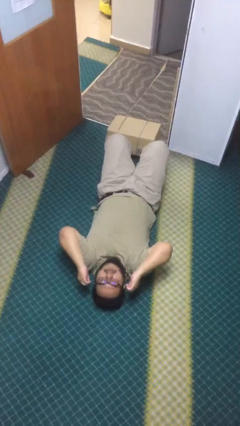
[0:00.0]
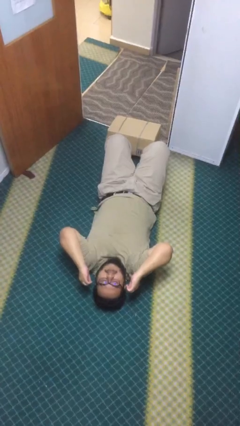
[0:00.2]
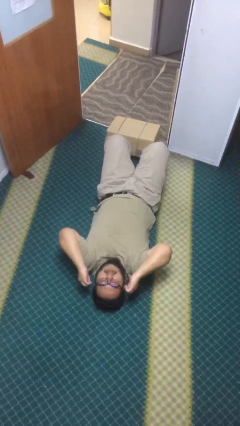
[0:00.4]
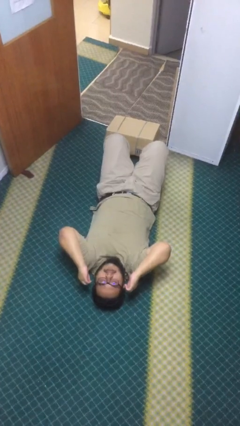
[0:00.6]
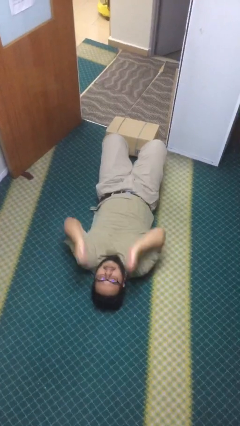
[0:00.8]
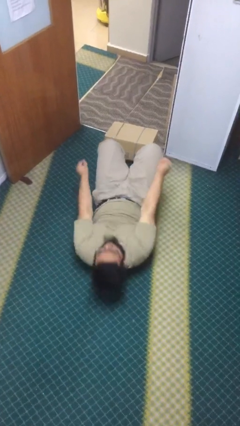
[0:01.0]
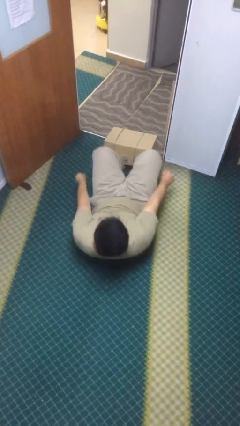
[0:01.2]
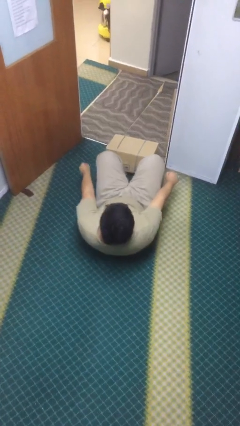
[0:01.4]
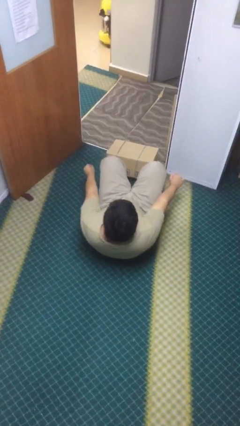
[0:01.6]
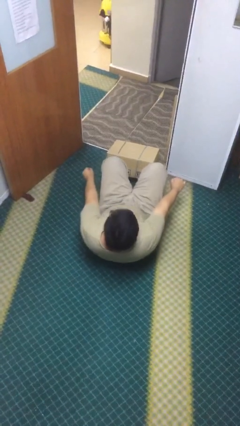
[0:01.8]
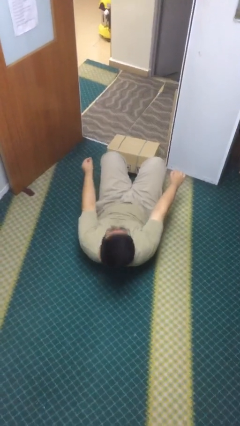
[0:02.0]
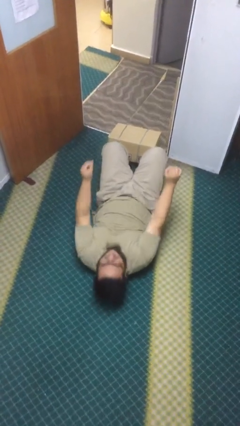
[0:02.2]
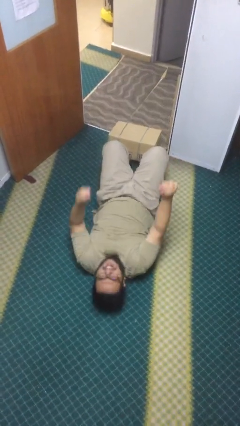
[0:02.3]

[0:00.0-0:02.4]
person exercises with situp

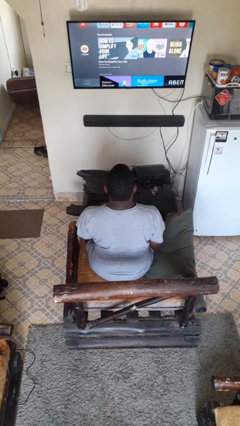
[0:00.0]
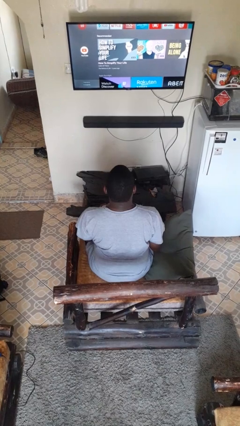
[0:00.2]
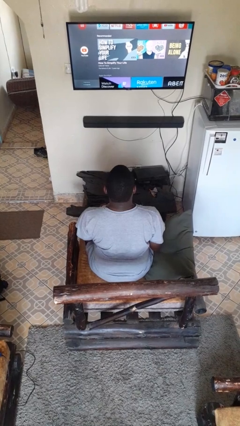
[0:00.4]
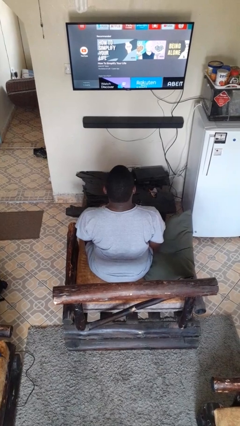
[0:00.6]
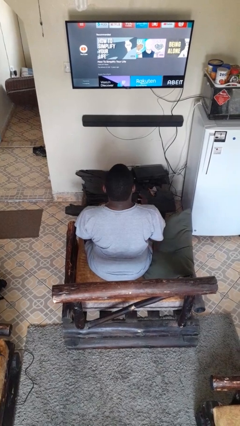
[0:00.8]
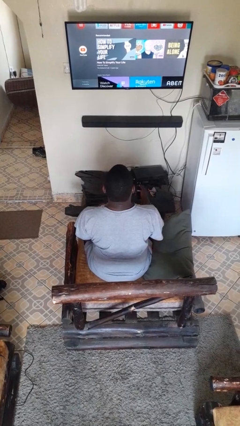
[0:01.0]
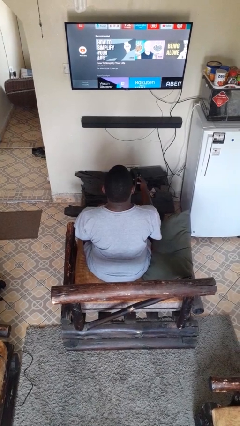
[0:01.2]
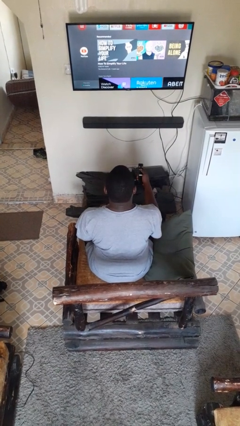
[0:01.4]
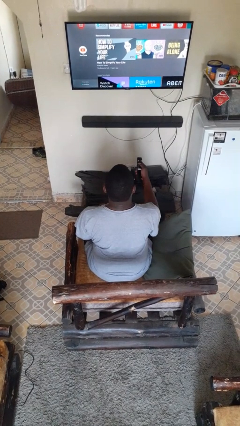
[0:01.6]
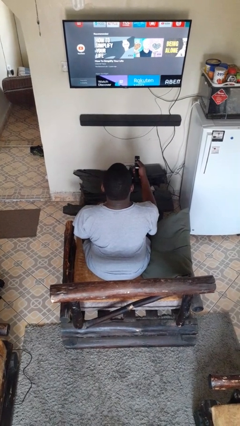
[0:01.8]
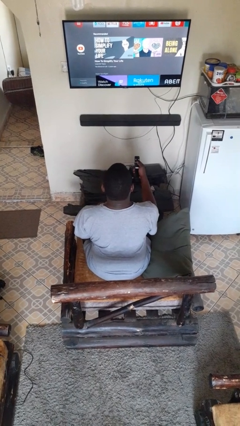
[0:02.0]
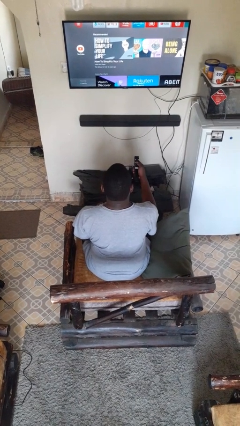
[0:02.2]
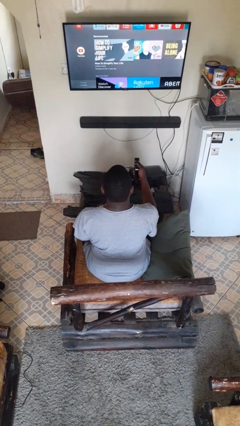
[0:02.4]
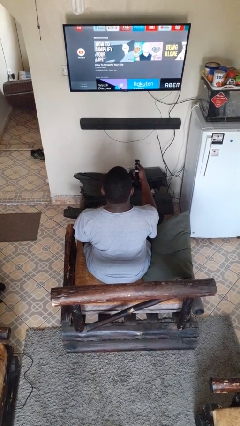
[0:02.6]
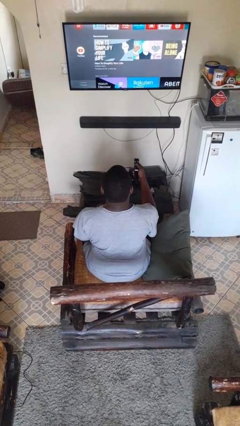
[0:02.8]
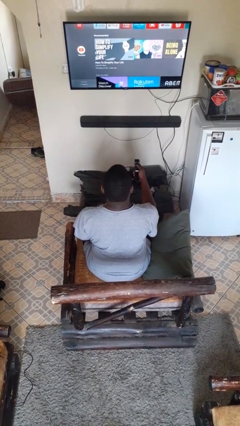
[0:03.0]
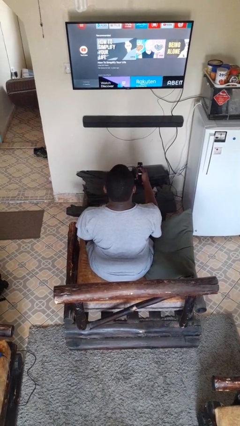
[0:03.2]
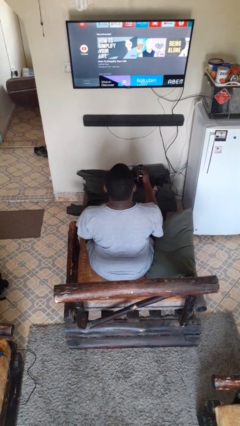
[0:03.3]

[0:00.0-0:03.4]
person uses television remote

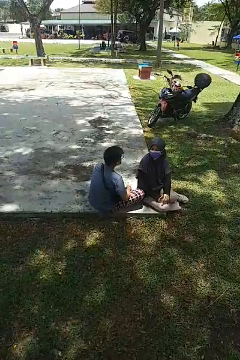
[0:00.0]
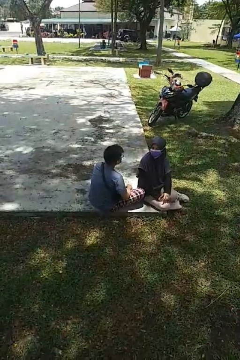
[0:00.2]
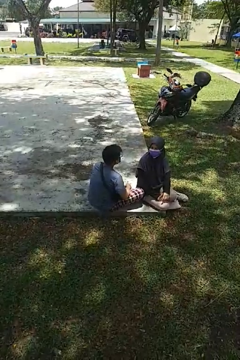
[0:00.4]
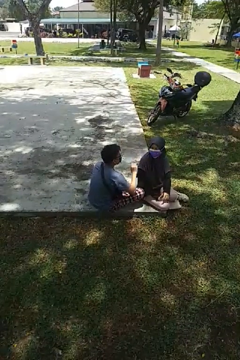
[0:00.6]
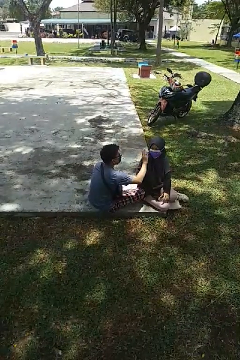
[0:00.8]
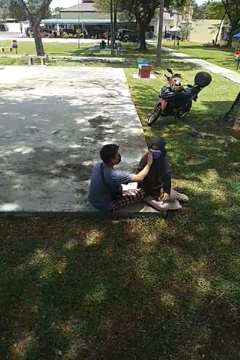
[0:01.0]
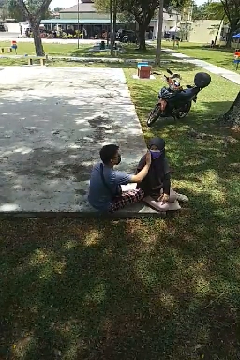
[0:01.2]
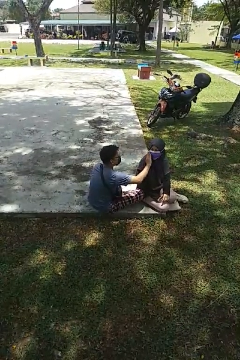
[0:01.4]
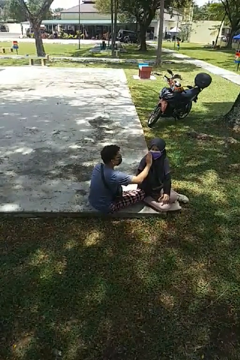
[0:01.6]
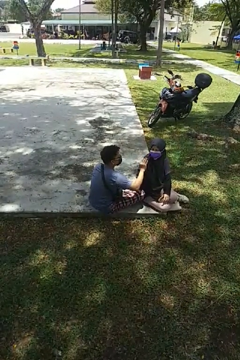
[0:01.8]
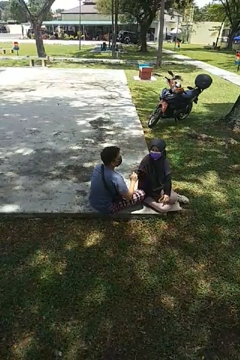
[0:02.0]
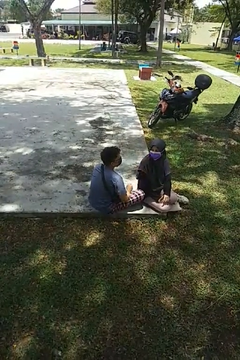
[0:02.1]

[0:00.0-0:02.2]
person touches face of person

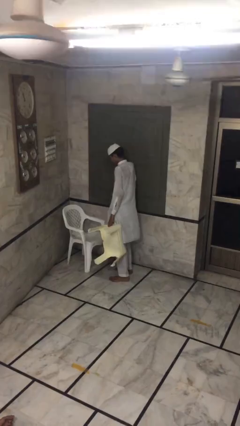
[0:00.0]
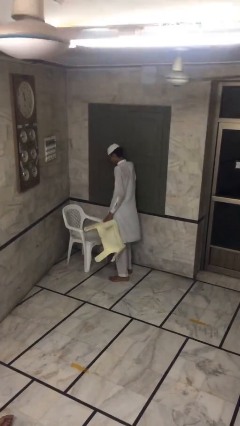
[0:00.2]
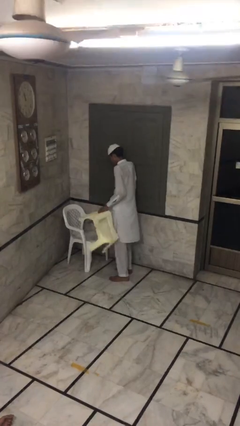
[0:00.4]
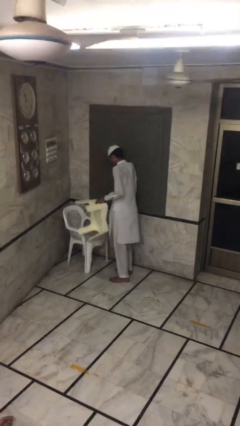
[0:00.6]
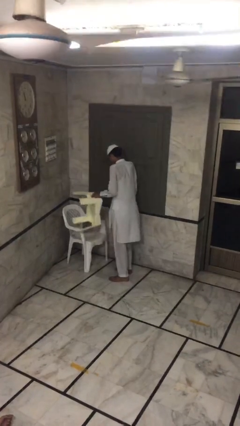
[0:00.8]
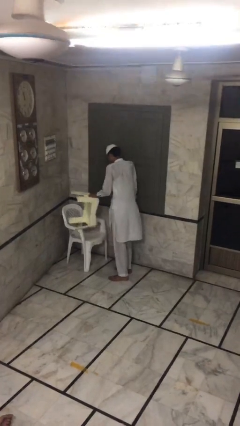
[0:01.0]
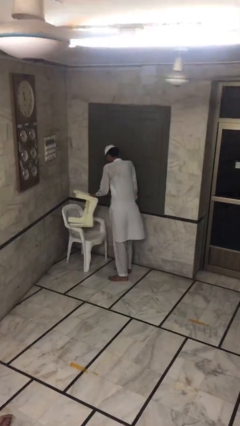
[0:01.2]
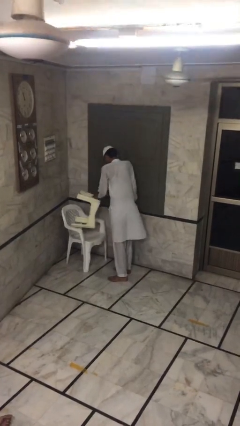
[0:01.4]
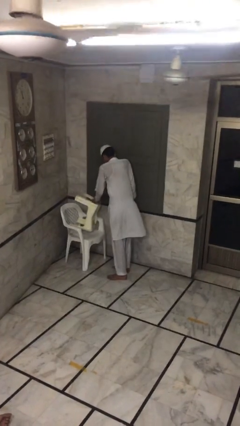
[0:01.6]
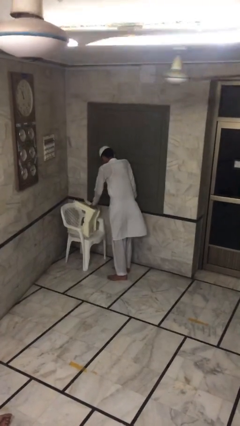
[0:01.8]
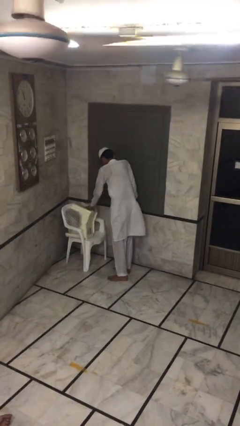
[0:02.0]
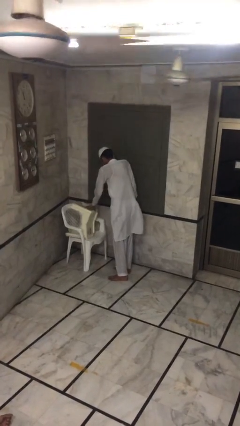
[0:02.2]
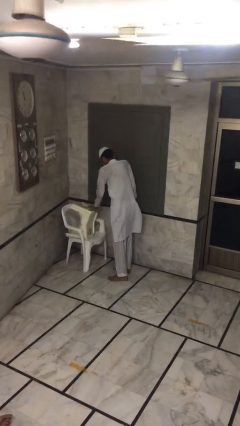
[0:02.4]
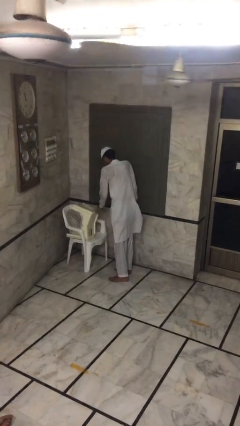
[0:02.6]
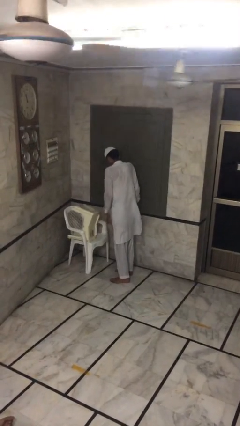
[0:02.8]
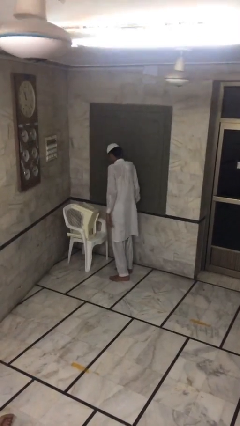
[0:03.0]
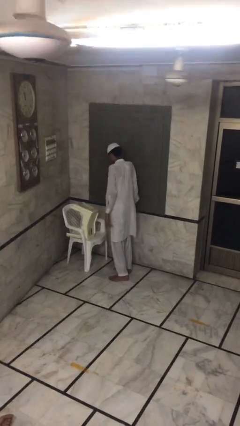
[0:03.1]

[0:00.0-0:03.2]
person puts down object on table

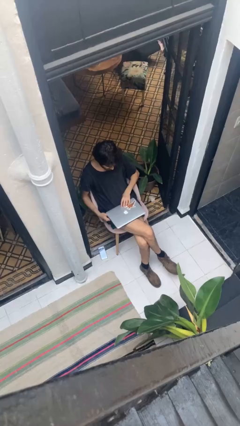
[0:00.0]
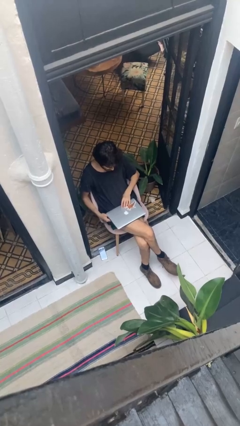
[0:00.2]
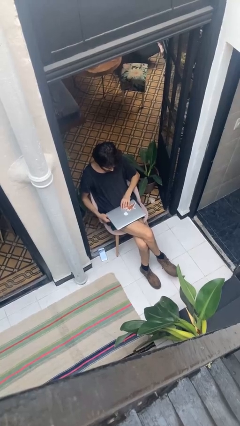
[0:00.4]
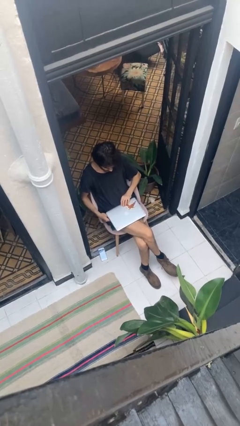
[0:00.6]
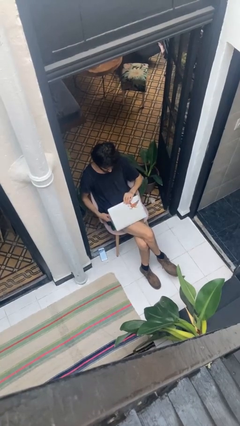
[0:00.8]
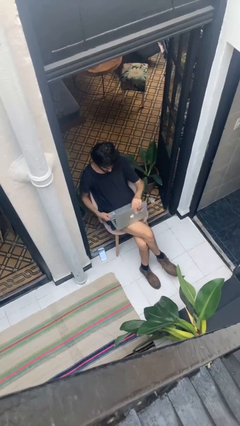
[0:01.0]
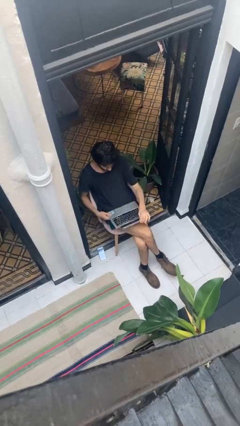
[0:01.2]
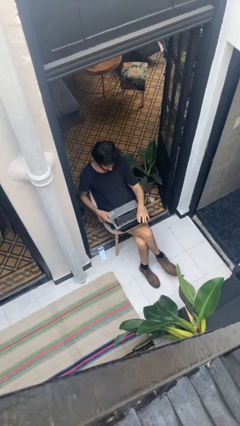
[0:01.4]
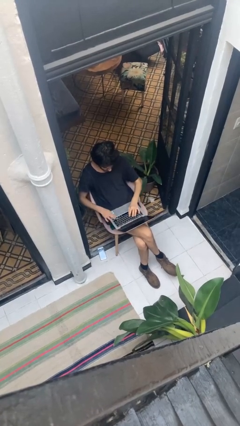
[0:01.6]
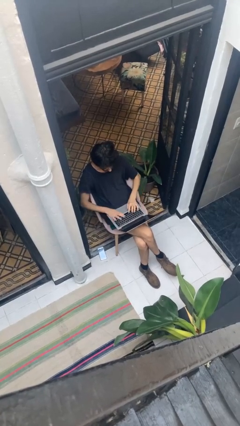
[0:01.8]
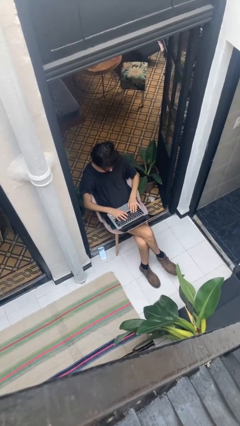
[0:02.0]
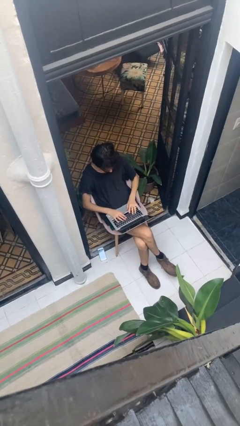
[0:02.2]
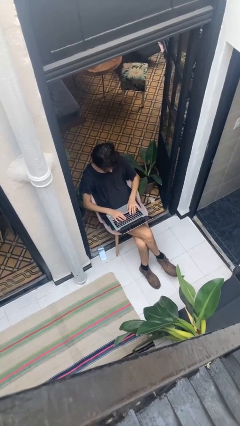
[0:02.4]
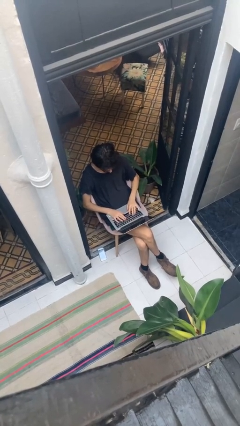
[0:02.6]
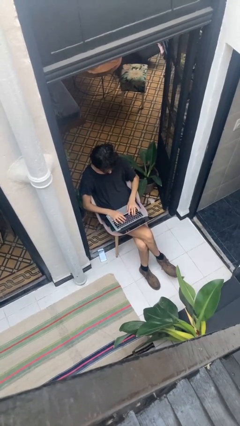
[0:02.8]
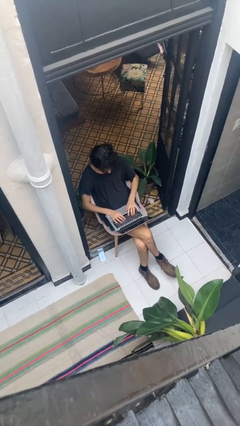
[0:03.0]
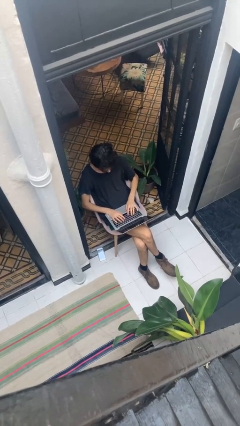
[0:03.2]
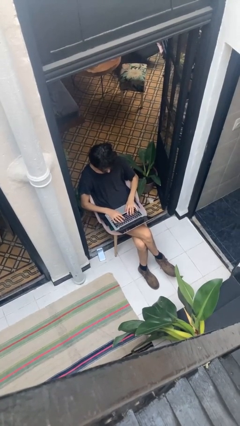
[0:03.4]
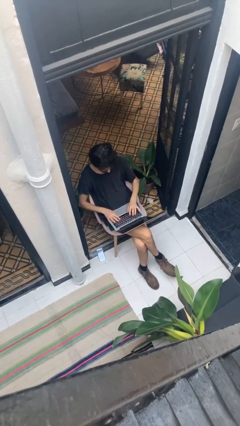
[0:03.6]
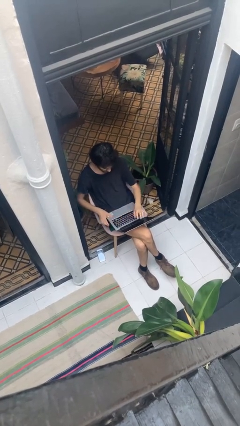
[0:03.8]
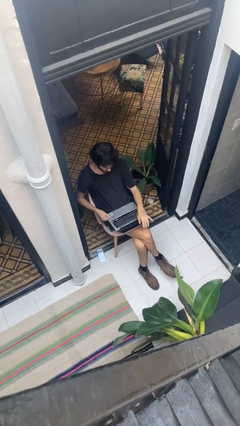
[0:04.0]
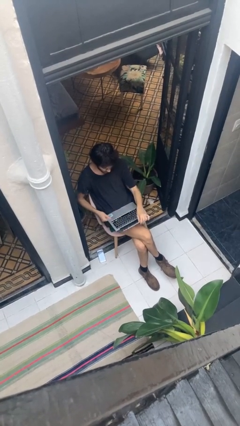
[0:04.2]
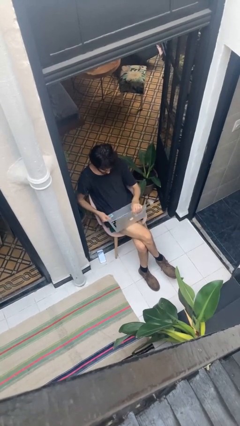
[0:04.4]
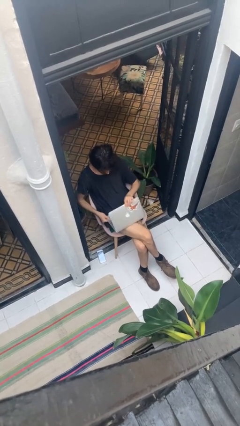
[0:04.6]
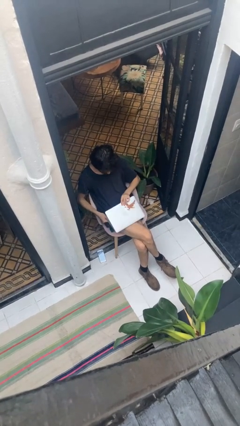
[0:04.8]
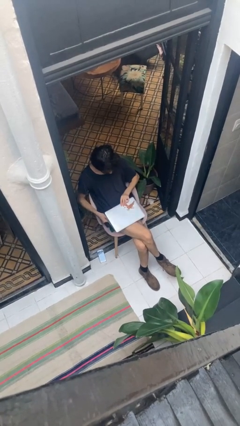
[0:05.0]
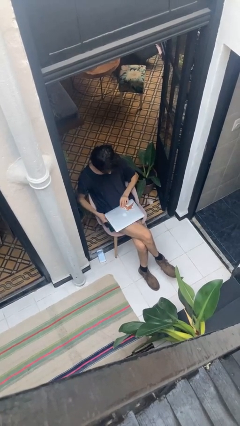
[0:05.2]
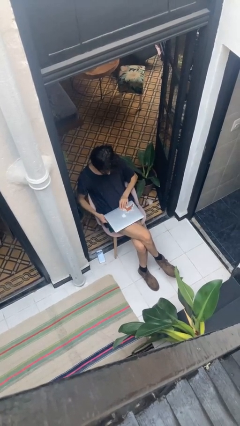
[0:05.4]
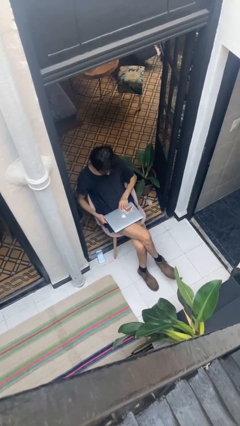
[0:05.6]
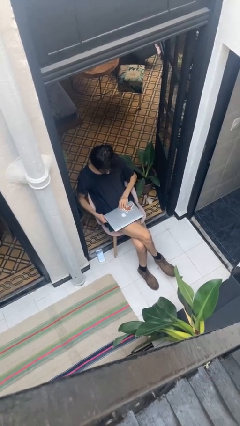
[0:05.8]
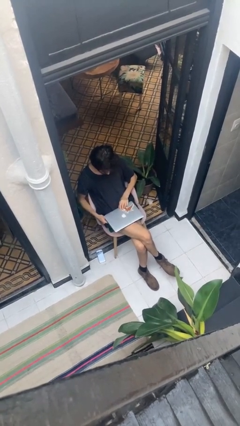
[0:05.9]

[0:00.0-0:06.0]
person interacts with laptop

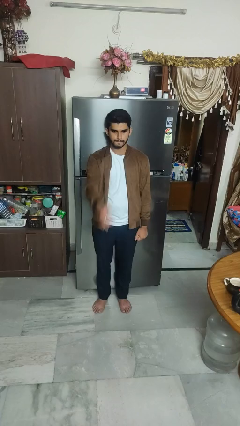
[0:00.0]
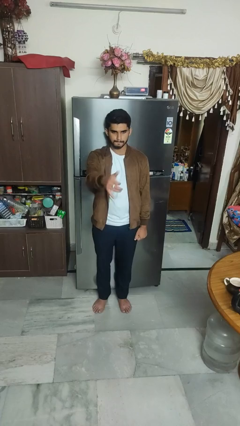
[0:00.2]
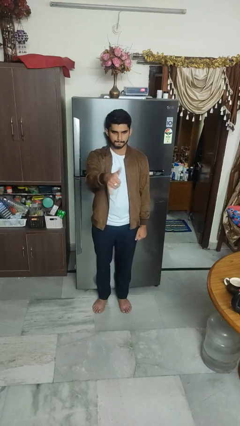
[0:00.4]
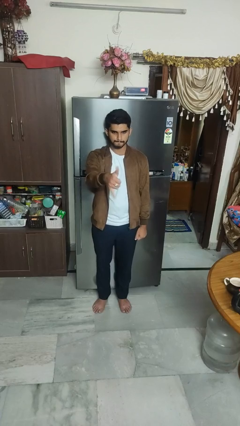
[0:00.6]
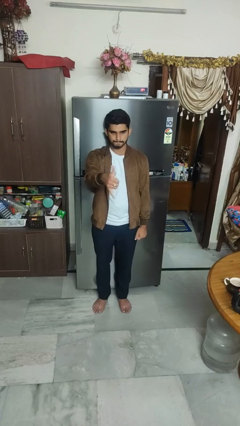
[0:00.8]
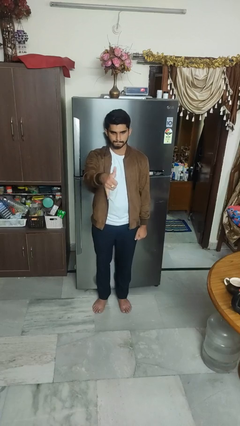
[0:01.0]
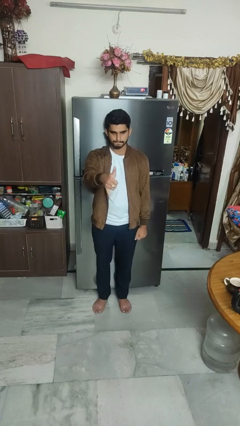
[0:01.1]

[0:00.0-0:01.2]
person gestures hang loose
